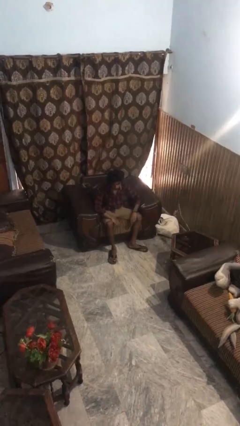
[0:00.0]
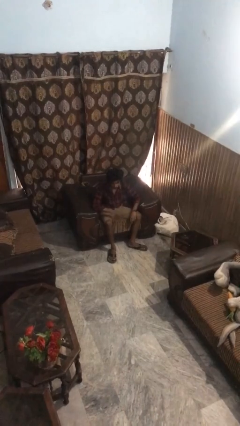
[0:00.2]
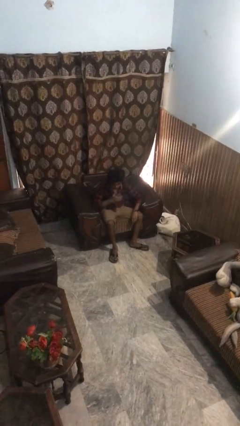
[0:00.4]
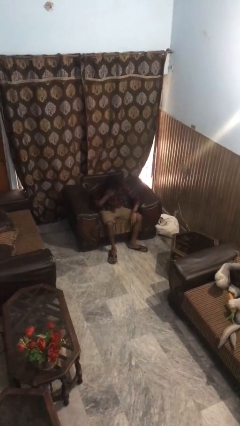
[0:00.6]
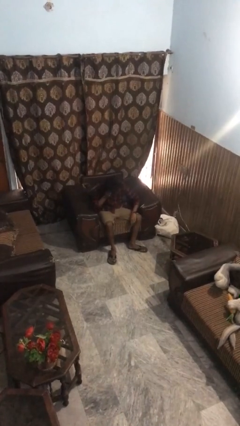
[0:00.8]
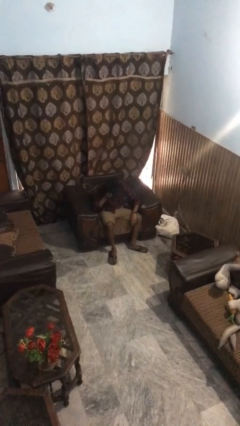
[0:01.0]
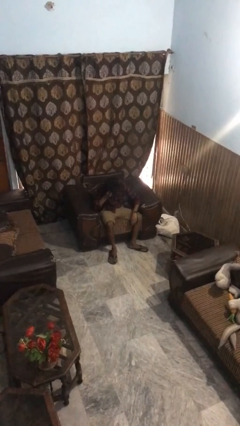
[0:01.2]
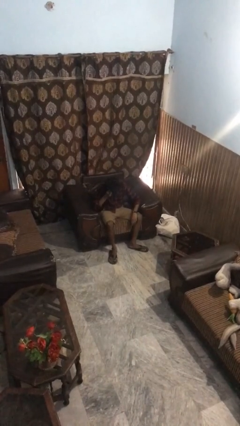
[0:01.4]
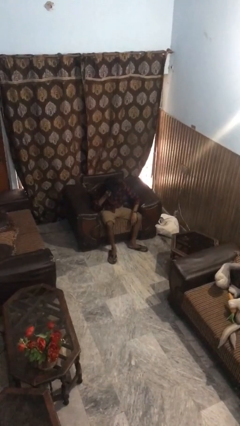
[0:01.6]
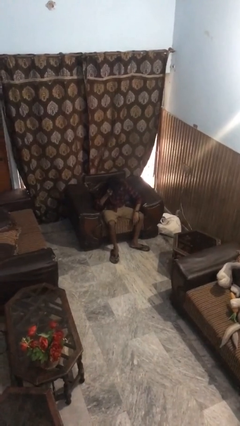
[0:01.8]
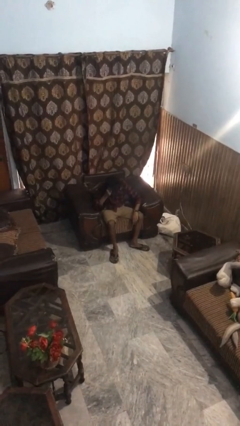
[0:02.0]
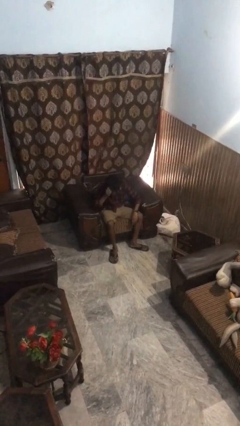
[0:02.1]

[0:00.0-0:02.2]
person strokes hair

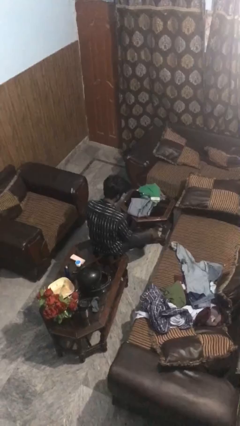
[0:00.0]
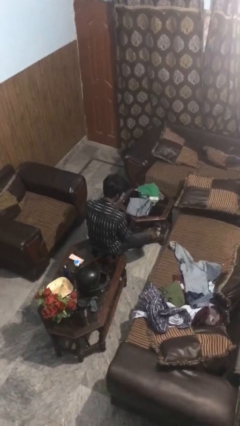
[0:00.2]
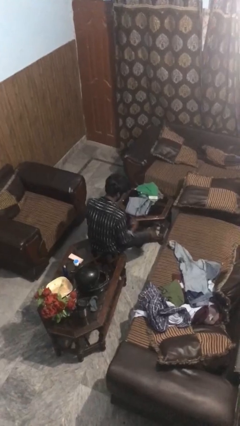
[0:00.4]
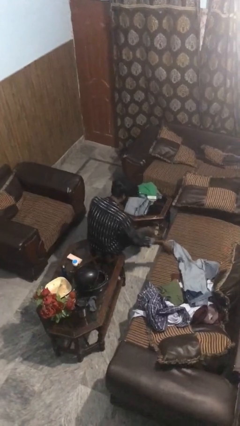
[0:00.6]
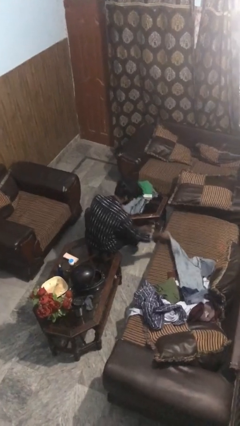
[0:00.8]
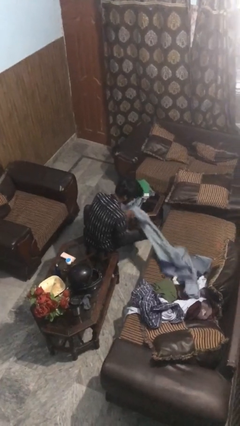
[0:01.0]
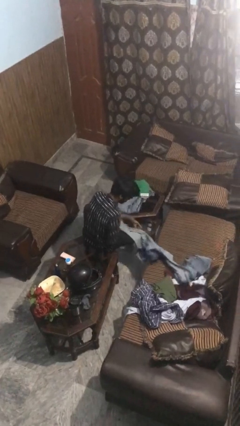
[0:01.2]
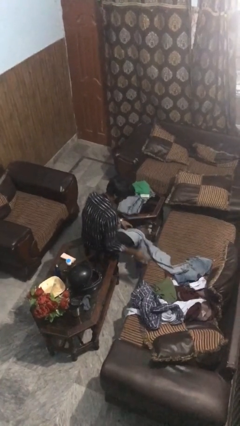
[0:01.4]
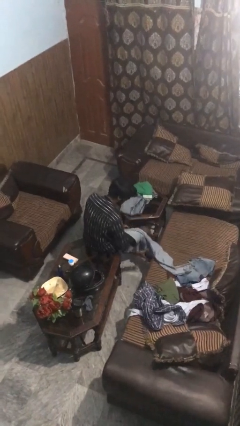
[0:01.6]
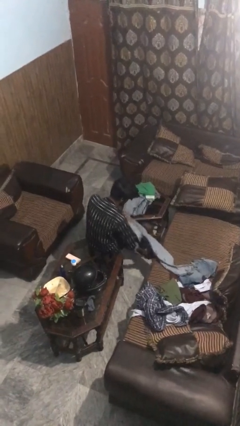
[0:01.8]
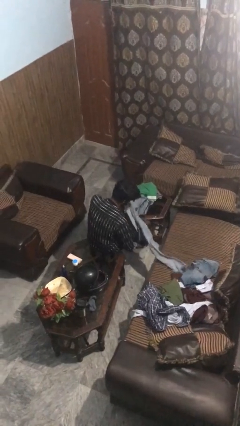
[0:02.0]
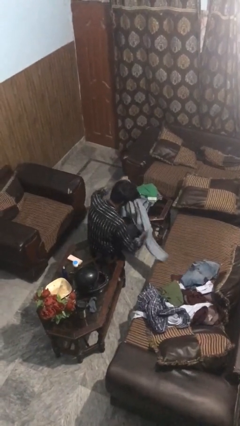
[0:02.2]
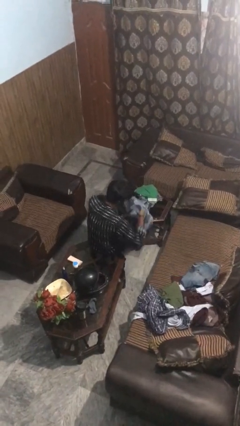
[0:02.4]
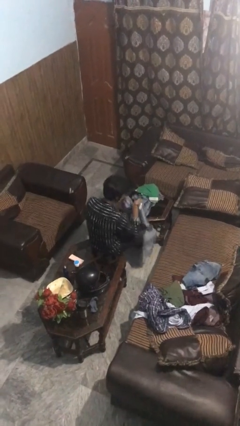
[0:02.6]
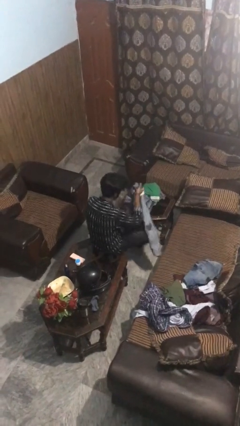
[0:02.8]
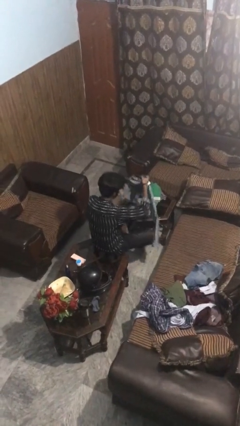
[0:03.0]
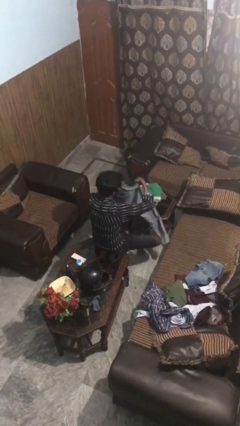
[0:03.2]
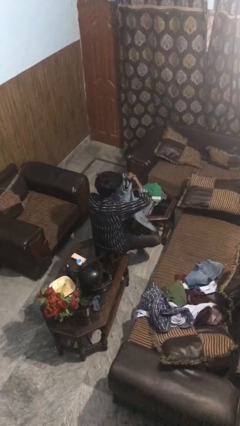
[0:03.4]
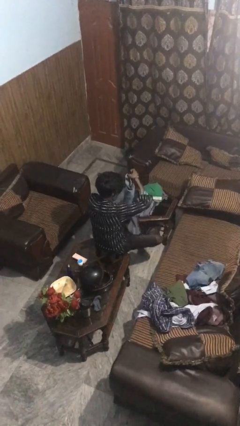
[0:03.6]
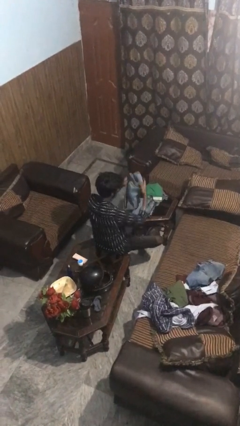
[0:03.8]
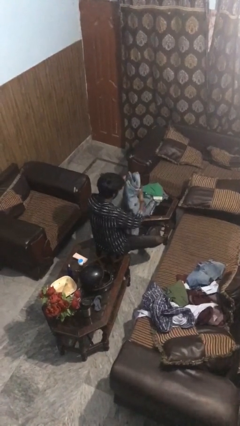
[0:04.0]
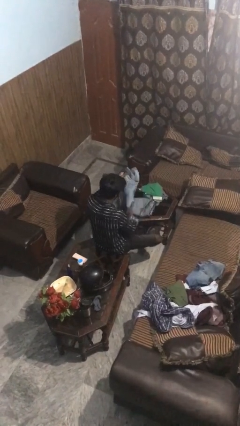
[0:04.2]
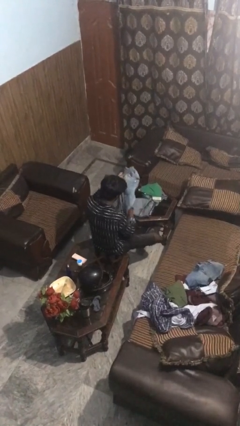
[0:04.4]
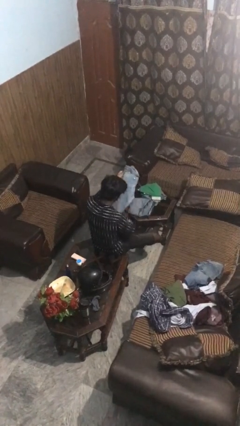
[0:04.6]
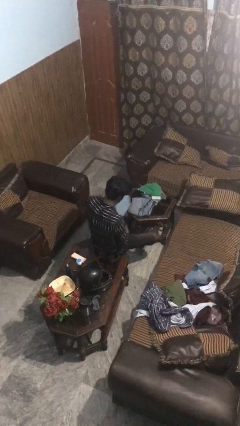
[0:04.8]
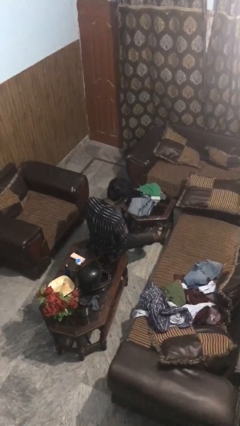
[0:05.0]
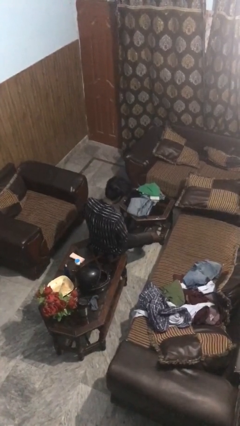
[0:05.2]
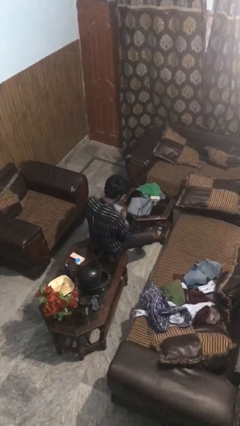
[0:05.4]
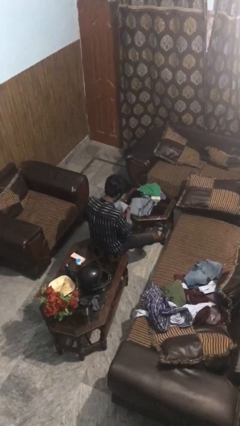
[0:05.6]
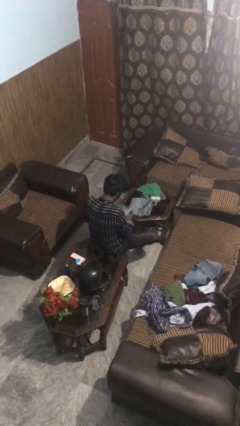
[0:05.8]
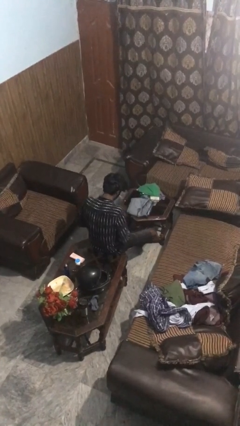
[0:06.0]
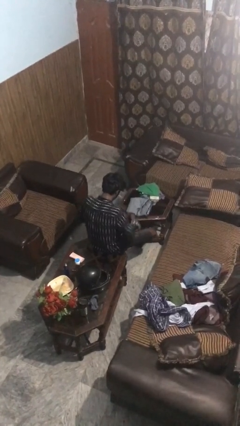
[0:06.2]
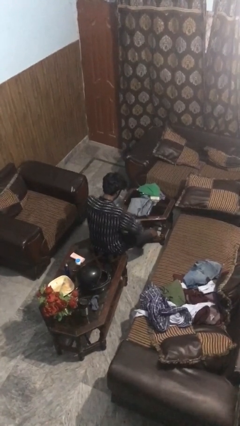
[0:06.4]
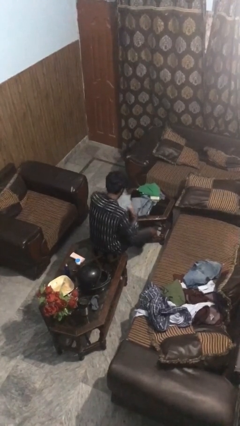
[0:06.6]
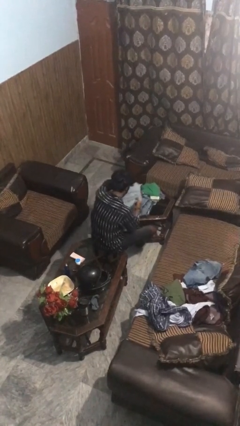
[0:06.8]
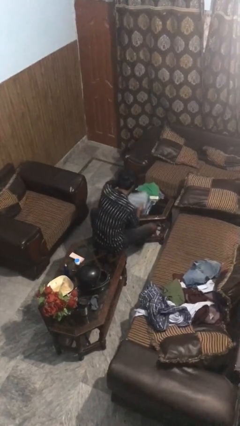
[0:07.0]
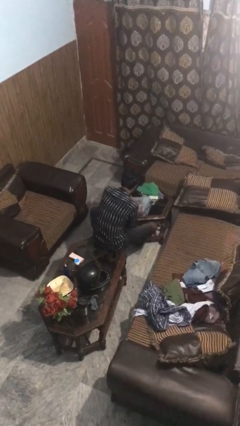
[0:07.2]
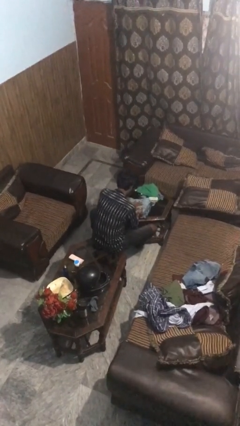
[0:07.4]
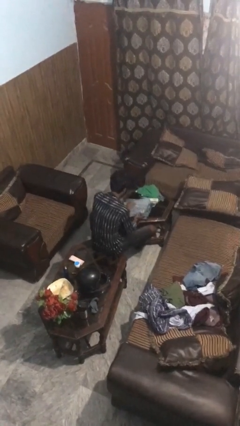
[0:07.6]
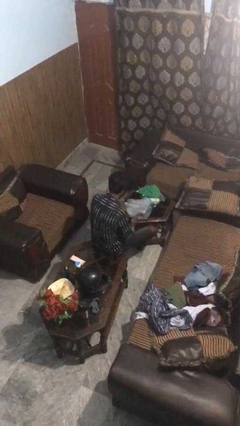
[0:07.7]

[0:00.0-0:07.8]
person folds pants

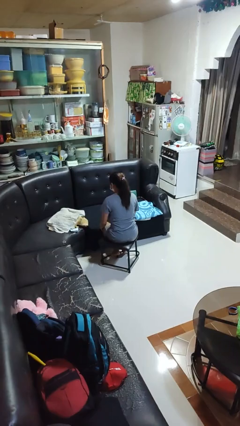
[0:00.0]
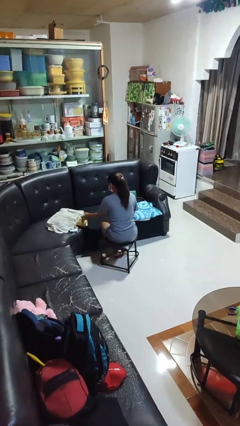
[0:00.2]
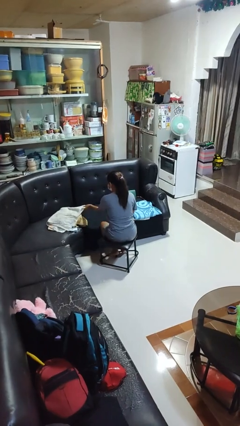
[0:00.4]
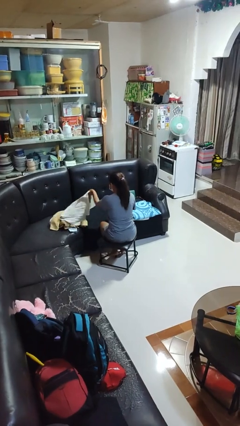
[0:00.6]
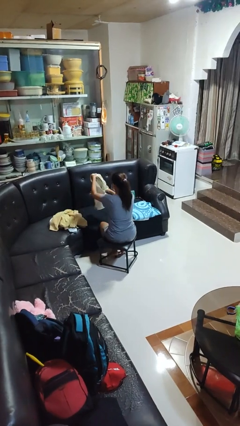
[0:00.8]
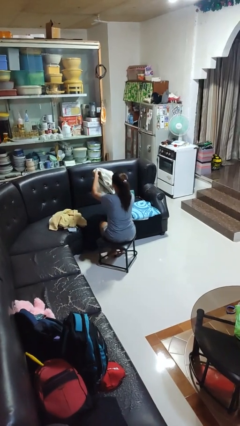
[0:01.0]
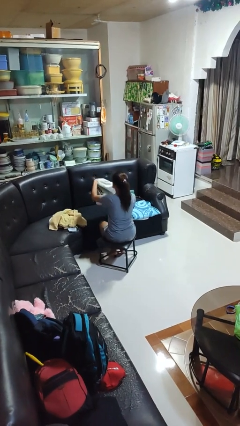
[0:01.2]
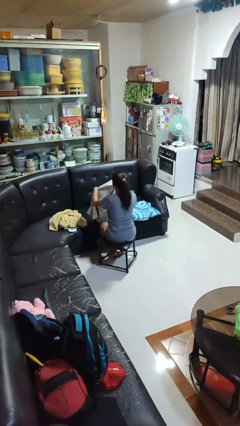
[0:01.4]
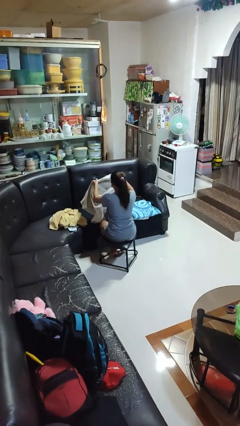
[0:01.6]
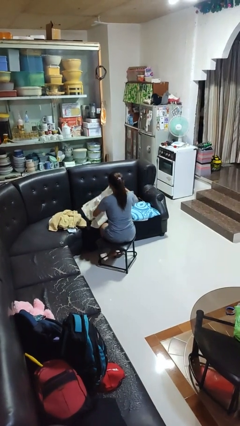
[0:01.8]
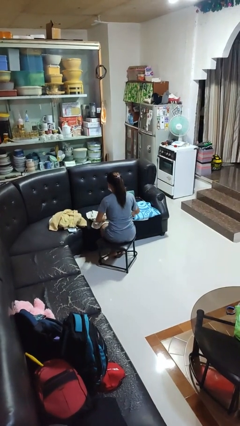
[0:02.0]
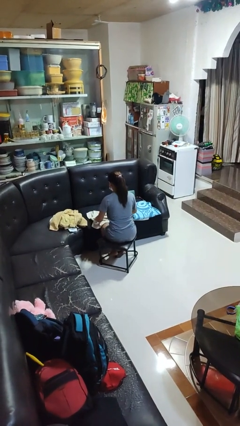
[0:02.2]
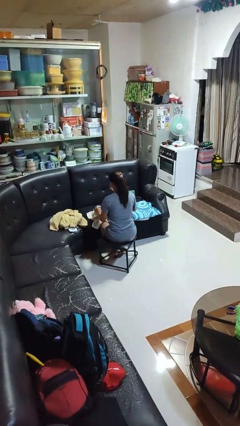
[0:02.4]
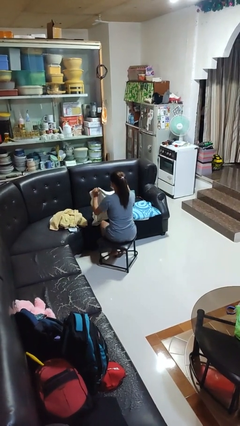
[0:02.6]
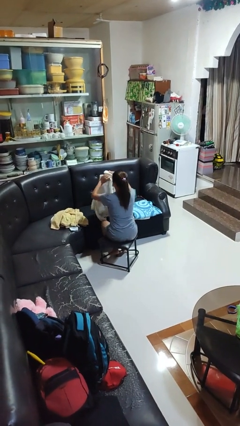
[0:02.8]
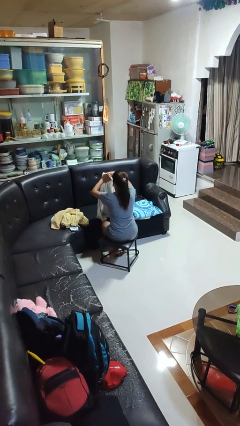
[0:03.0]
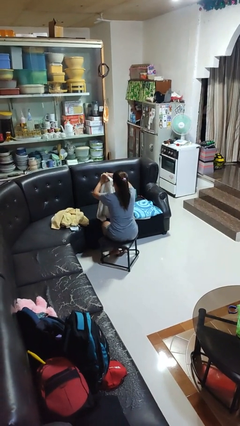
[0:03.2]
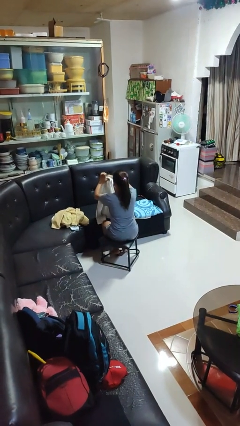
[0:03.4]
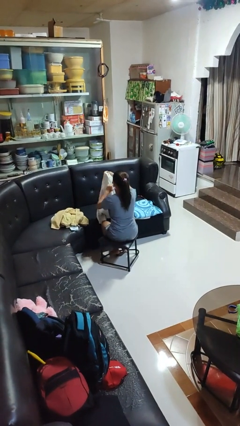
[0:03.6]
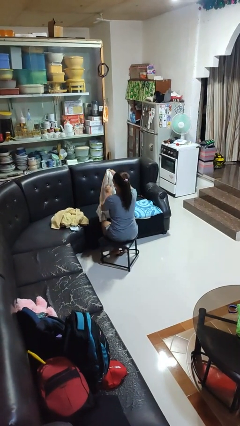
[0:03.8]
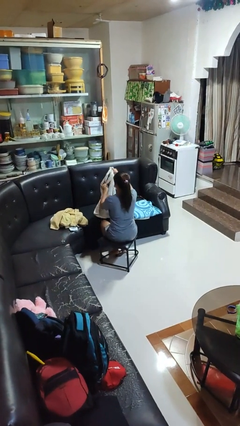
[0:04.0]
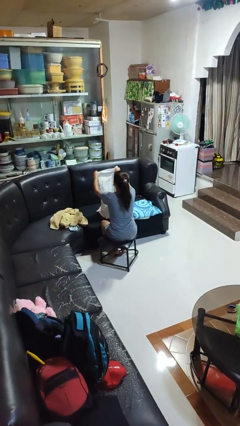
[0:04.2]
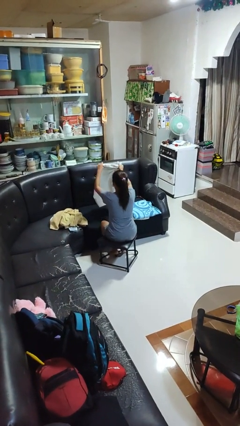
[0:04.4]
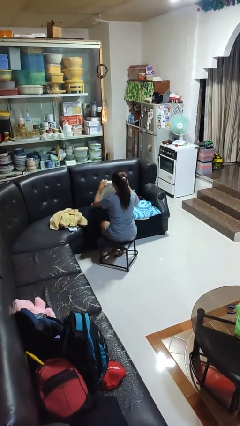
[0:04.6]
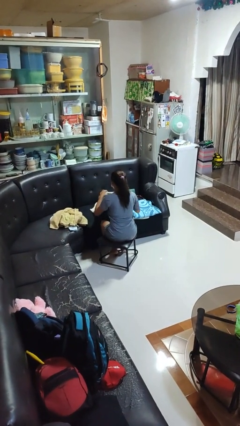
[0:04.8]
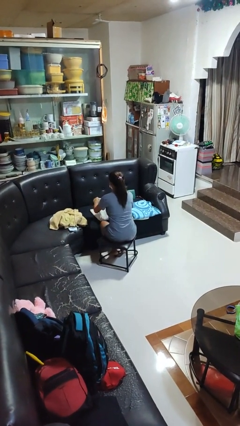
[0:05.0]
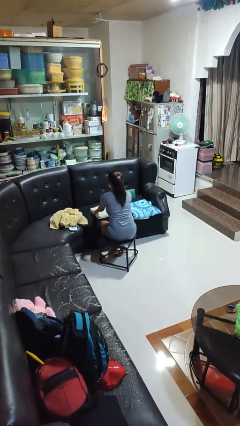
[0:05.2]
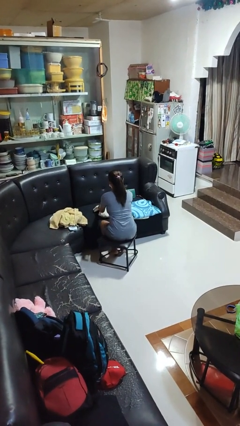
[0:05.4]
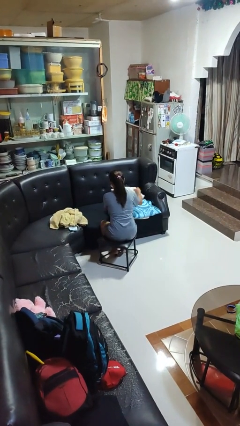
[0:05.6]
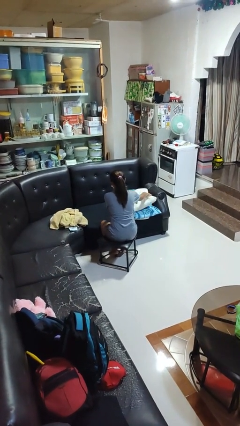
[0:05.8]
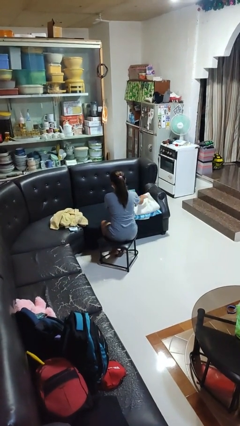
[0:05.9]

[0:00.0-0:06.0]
person folds towel

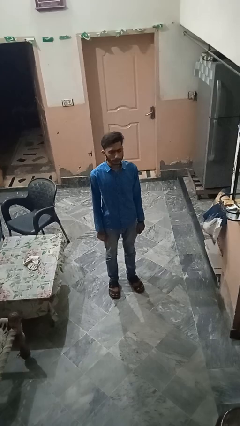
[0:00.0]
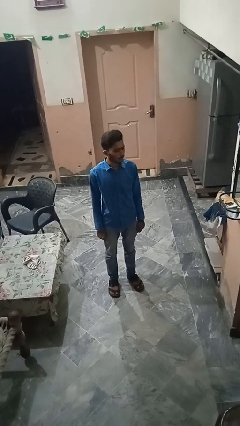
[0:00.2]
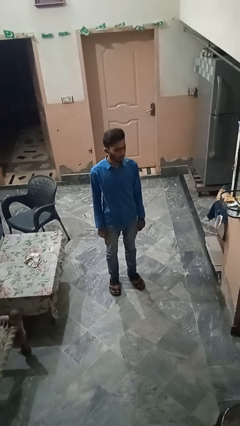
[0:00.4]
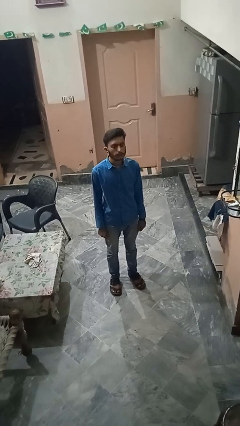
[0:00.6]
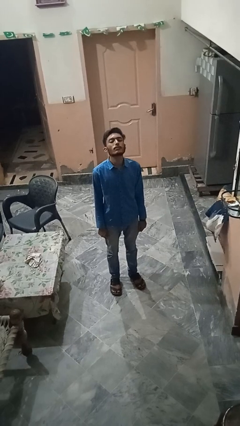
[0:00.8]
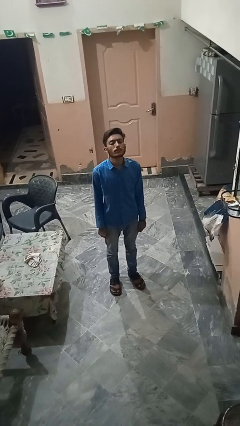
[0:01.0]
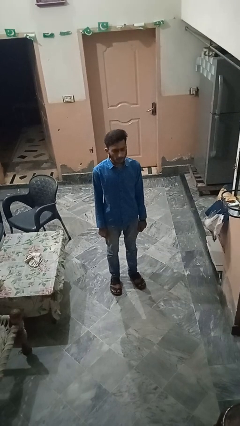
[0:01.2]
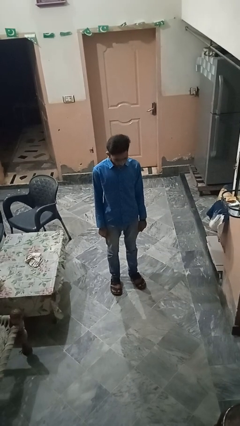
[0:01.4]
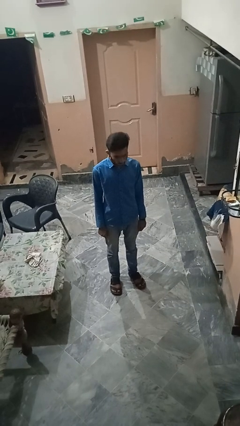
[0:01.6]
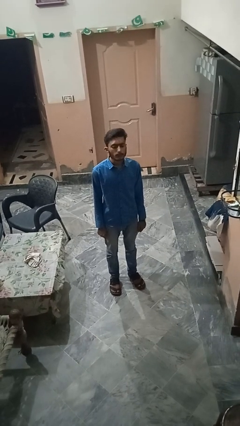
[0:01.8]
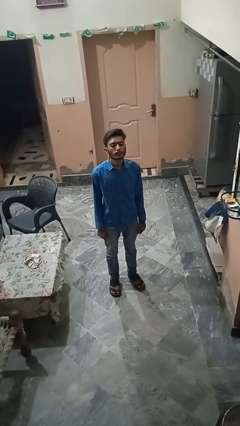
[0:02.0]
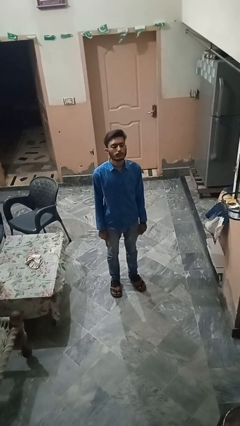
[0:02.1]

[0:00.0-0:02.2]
person nods head
